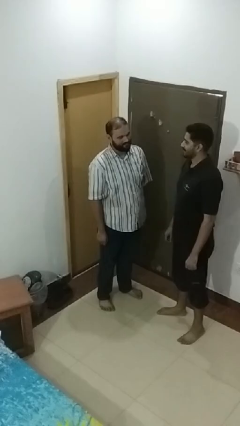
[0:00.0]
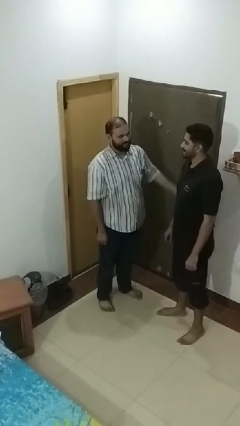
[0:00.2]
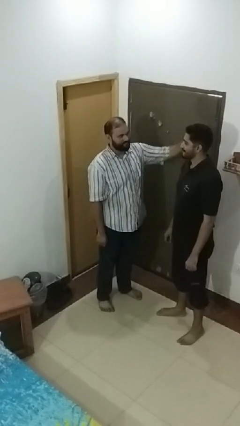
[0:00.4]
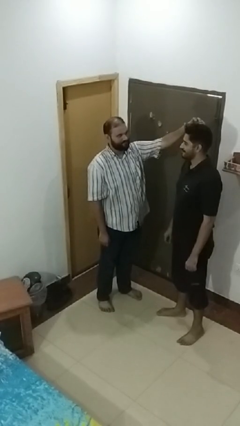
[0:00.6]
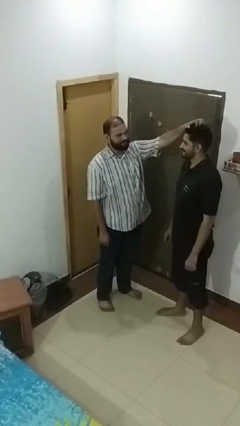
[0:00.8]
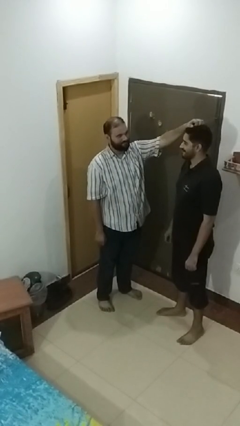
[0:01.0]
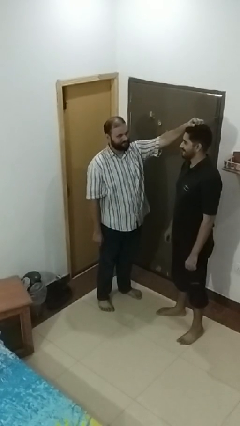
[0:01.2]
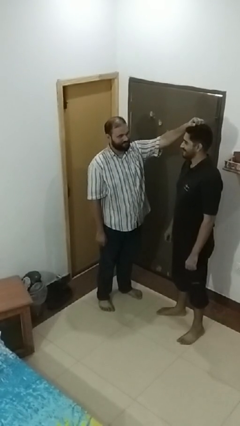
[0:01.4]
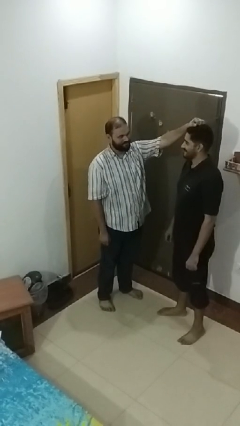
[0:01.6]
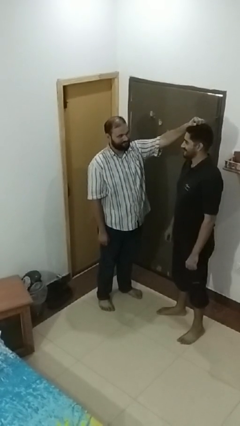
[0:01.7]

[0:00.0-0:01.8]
person grabs person by hair

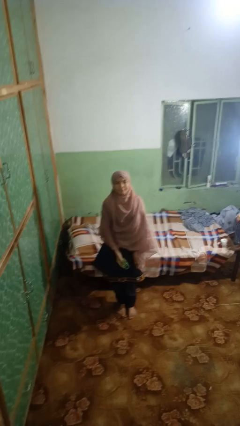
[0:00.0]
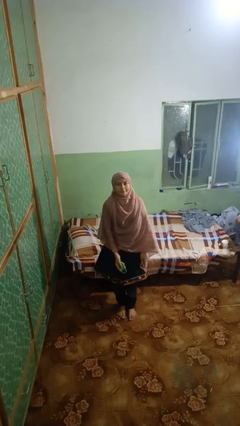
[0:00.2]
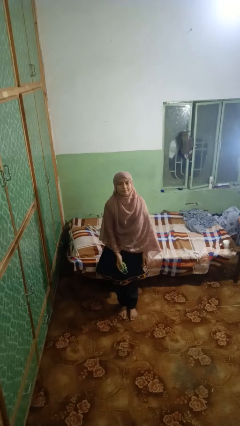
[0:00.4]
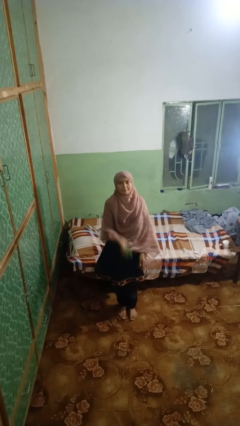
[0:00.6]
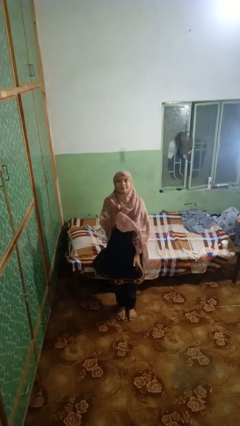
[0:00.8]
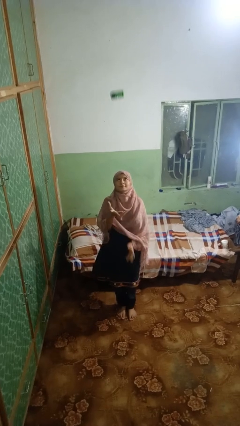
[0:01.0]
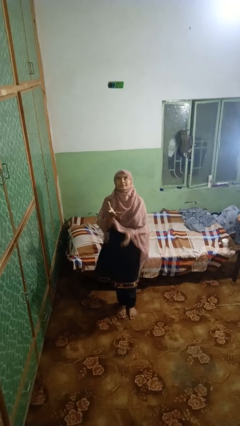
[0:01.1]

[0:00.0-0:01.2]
person throws object into air

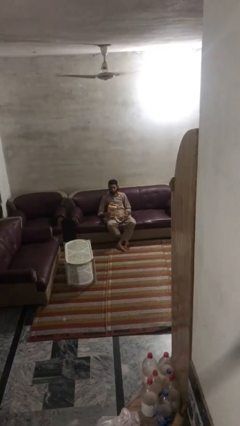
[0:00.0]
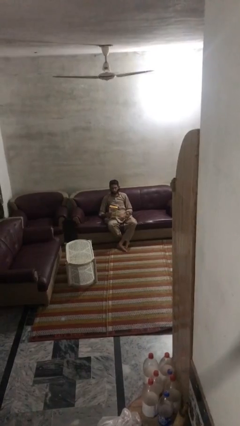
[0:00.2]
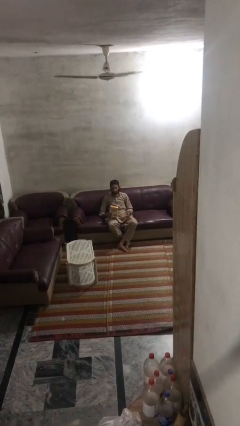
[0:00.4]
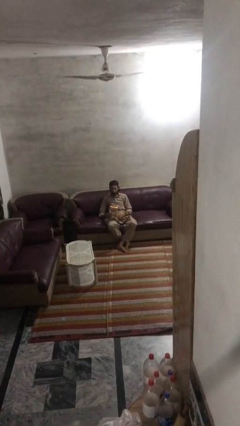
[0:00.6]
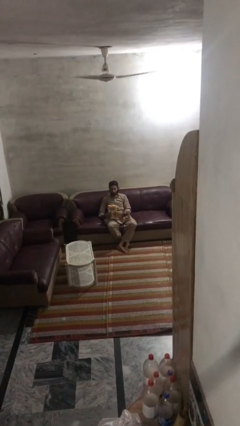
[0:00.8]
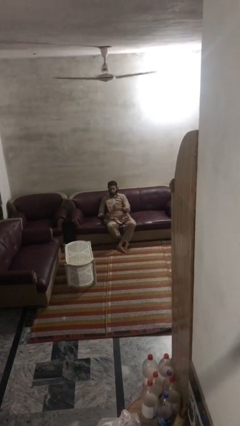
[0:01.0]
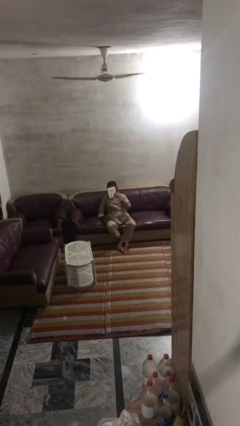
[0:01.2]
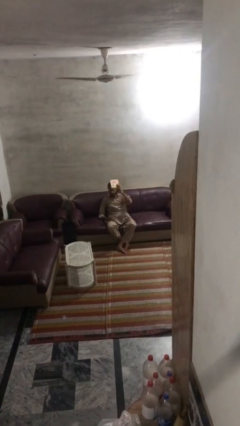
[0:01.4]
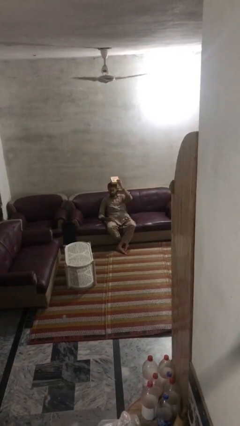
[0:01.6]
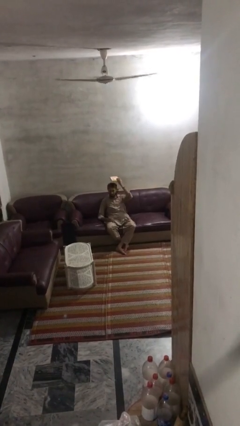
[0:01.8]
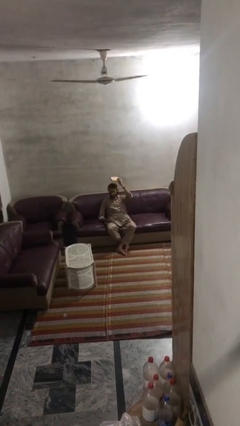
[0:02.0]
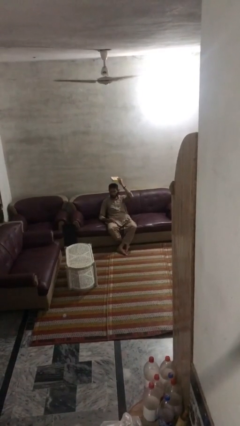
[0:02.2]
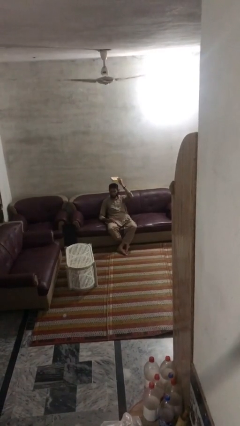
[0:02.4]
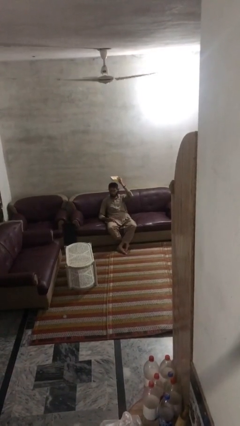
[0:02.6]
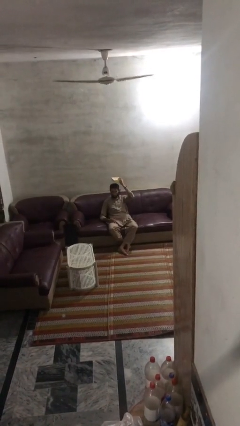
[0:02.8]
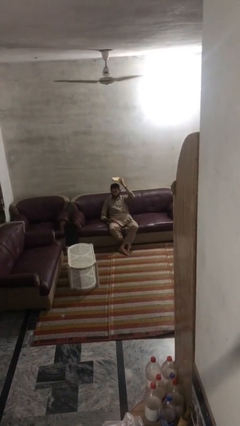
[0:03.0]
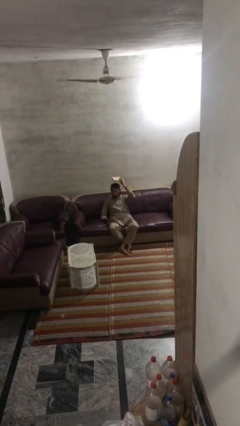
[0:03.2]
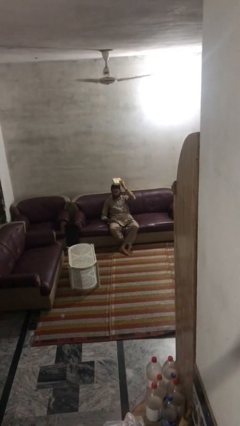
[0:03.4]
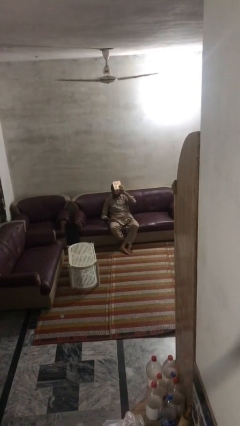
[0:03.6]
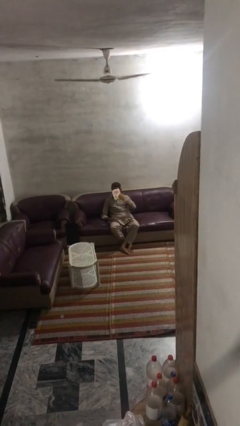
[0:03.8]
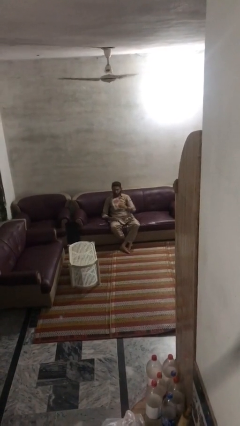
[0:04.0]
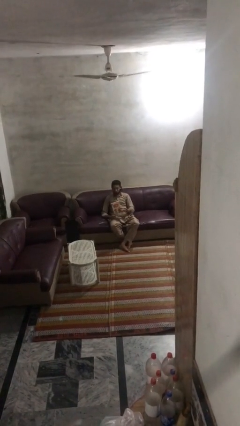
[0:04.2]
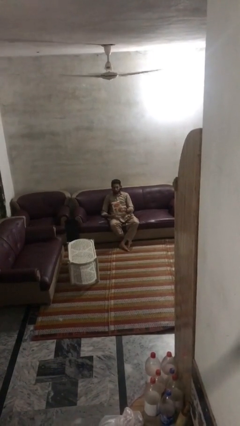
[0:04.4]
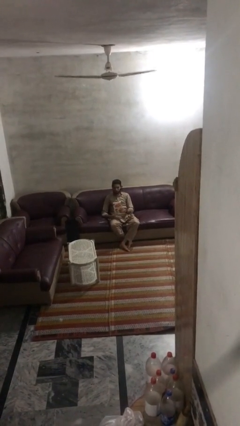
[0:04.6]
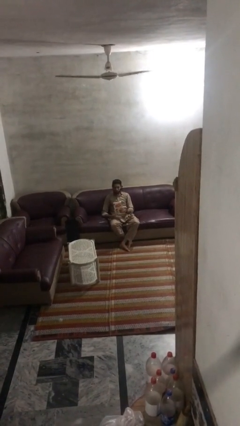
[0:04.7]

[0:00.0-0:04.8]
person holds object above head

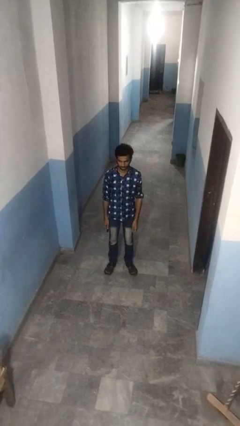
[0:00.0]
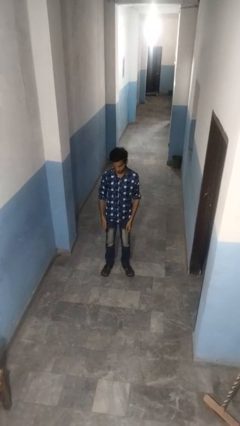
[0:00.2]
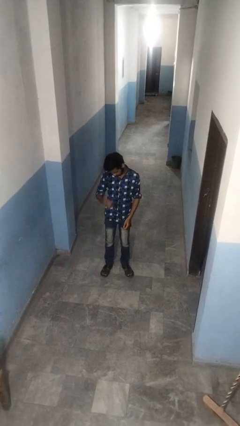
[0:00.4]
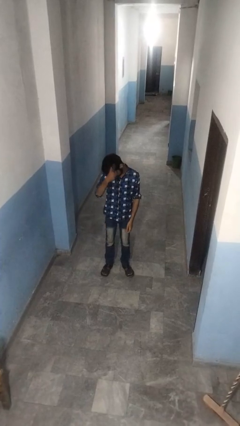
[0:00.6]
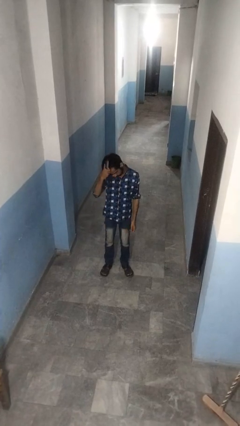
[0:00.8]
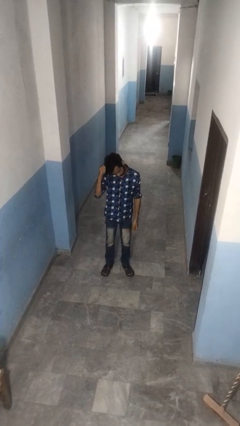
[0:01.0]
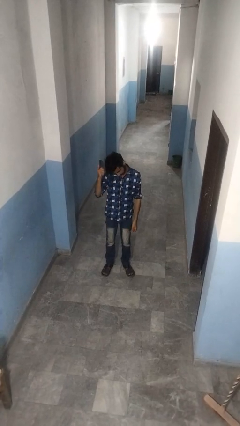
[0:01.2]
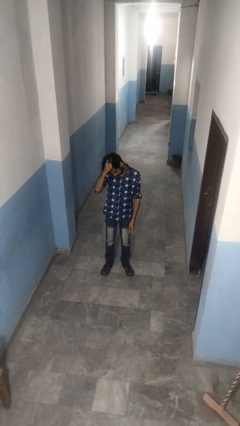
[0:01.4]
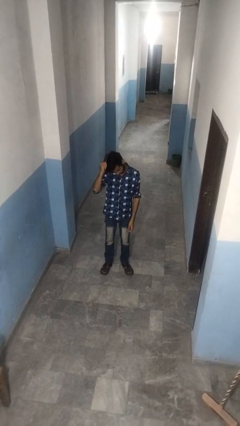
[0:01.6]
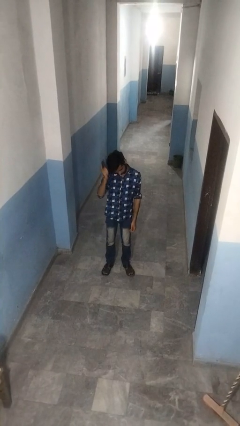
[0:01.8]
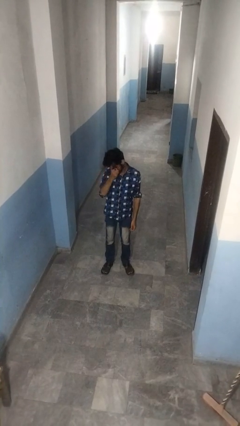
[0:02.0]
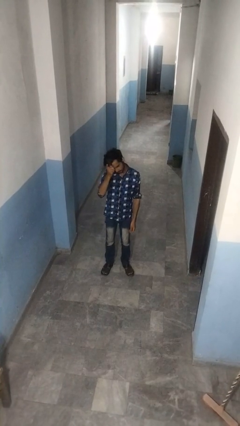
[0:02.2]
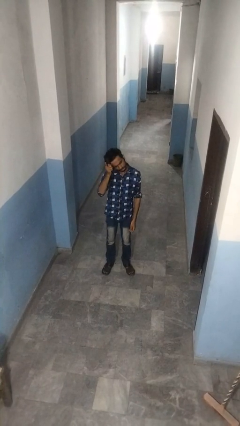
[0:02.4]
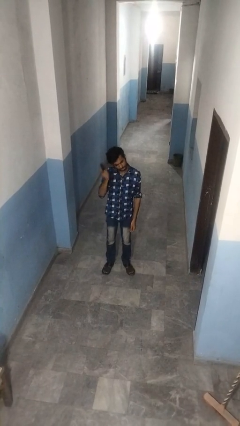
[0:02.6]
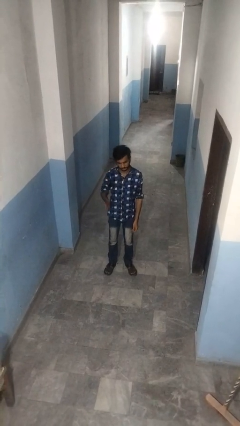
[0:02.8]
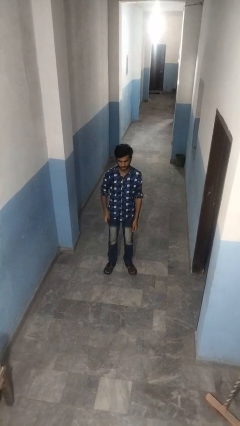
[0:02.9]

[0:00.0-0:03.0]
person brushes hair

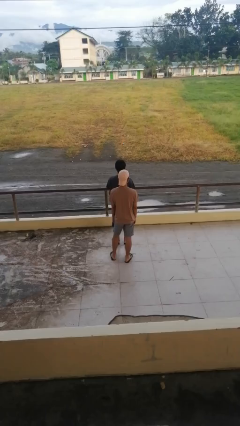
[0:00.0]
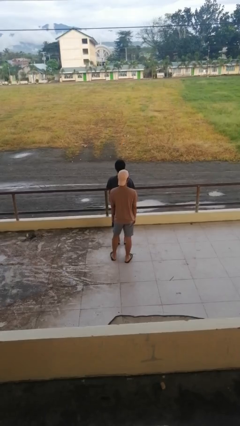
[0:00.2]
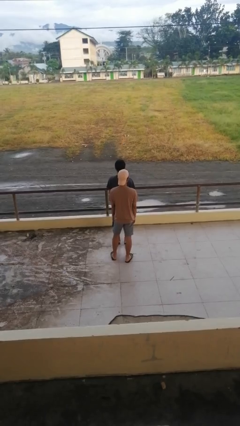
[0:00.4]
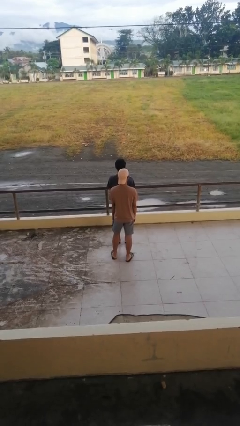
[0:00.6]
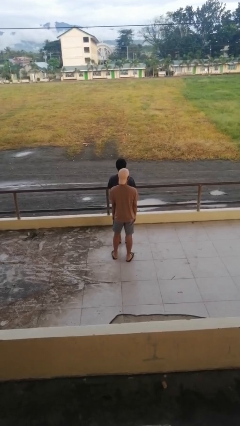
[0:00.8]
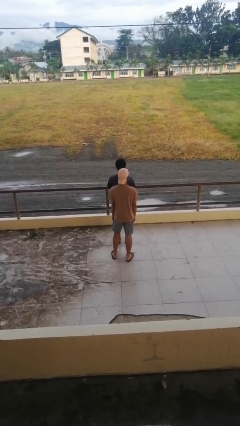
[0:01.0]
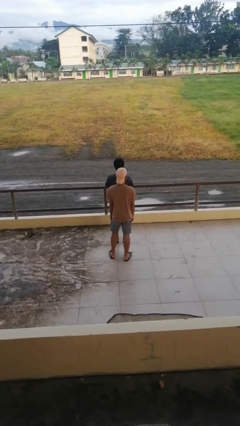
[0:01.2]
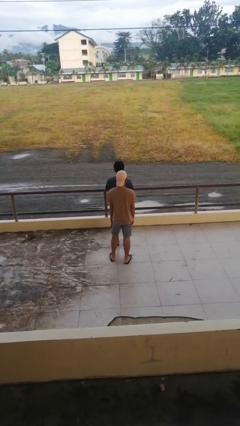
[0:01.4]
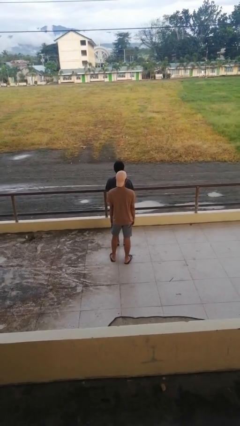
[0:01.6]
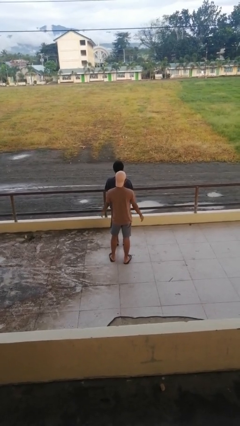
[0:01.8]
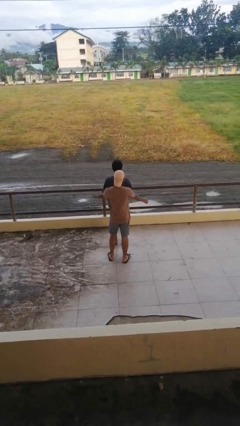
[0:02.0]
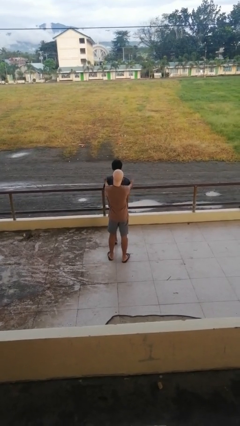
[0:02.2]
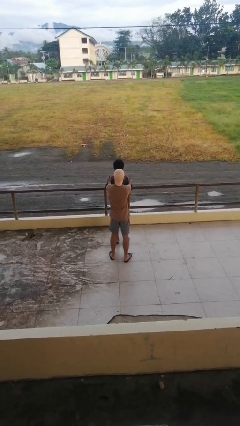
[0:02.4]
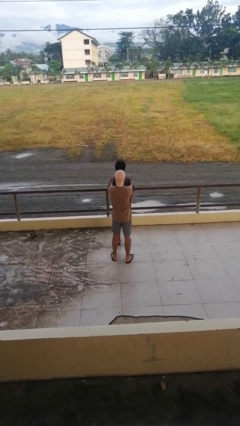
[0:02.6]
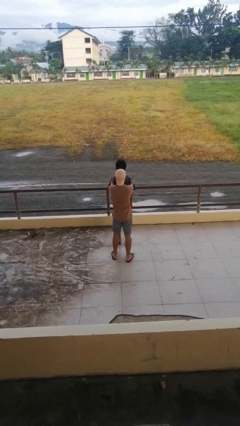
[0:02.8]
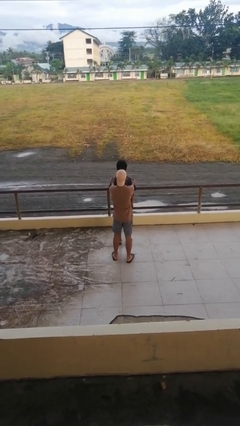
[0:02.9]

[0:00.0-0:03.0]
person pounds shoulders of person

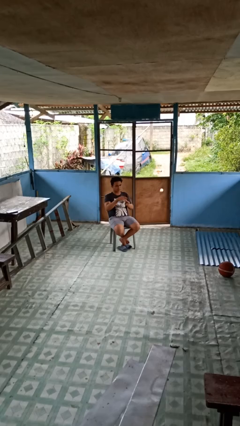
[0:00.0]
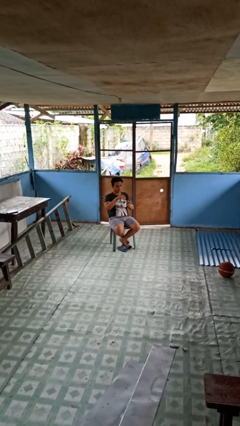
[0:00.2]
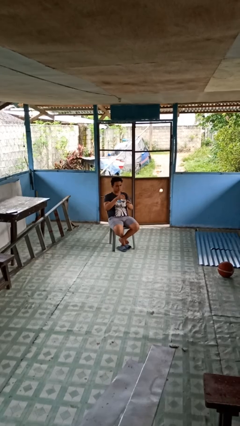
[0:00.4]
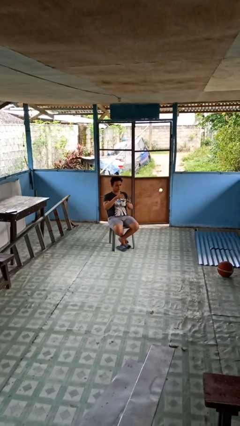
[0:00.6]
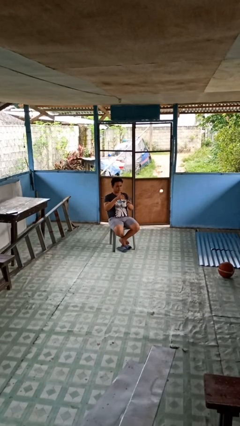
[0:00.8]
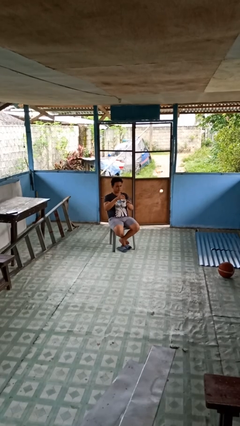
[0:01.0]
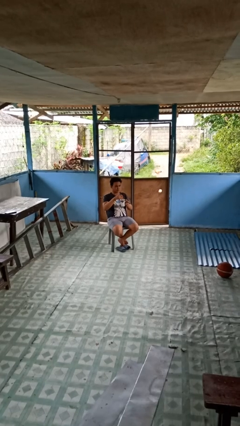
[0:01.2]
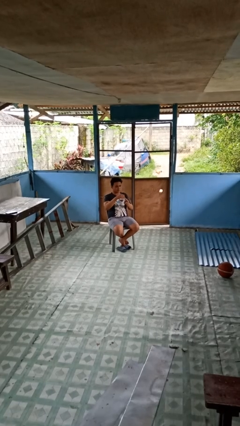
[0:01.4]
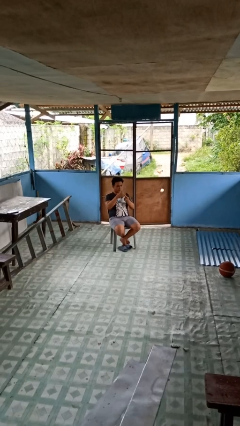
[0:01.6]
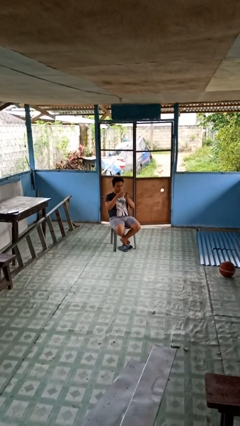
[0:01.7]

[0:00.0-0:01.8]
person stirs mug

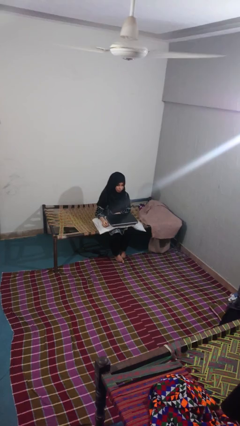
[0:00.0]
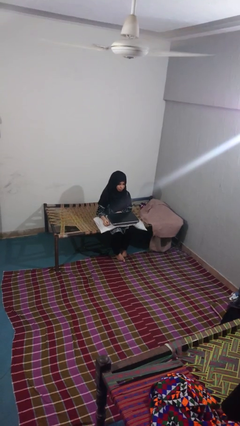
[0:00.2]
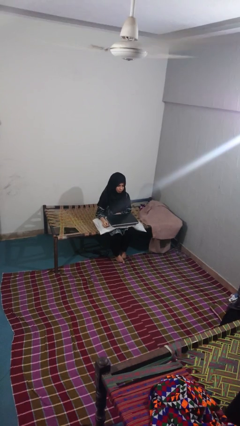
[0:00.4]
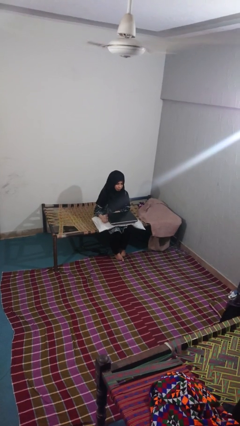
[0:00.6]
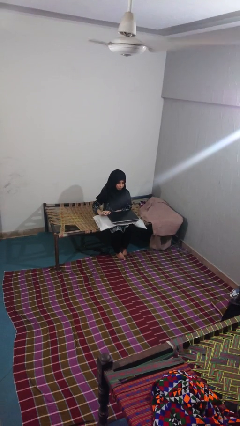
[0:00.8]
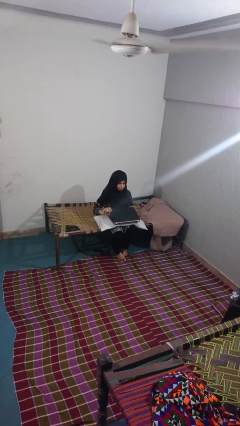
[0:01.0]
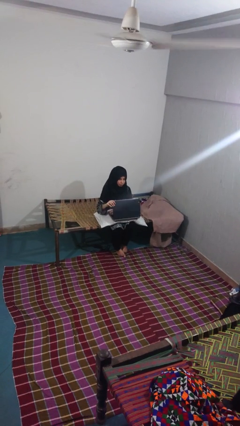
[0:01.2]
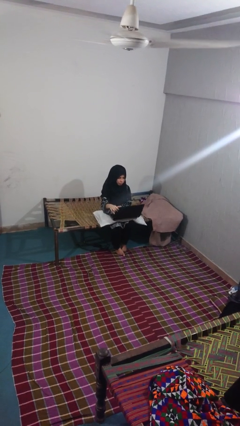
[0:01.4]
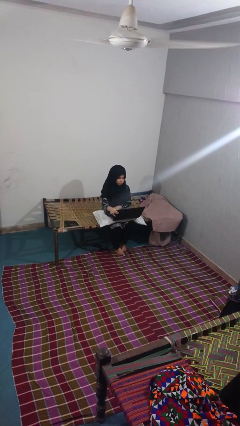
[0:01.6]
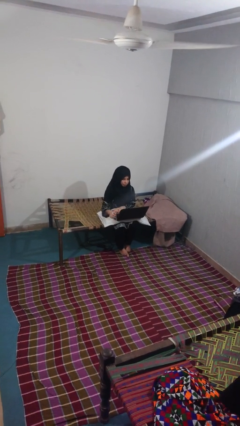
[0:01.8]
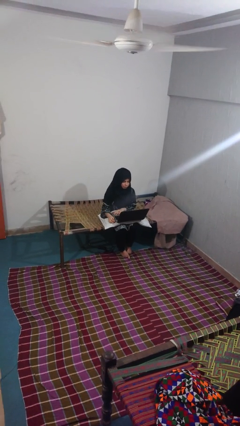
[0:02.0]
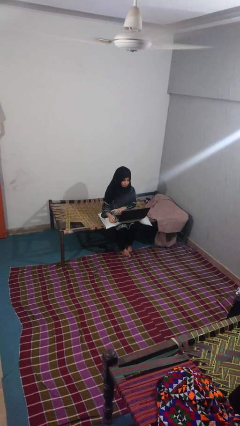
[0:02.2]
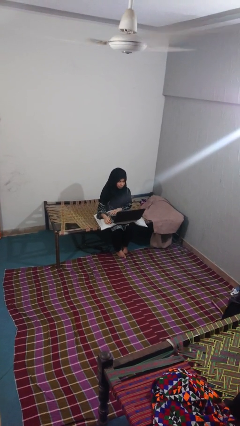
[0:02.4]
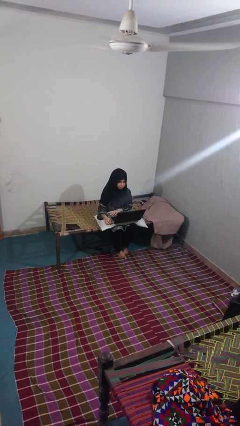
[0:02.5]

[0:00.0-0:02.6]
person opens laptop
